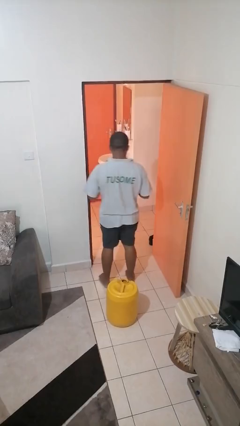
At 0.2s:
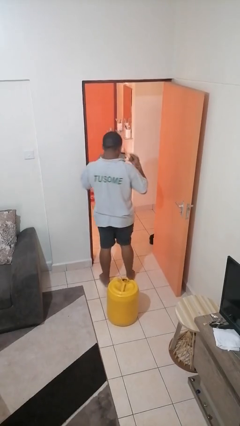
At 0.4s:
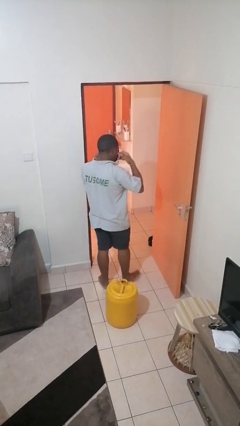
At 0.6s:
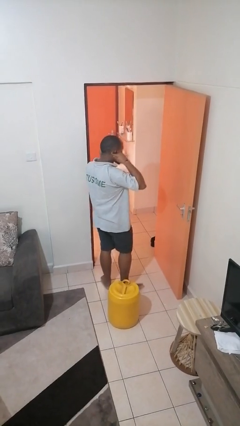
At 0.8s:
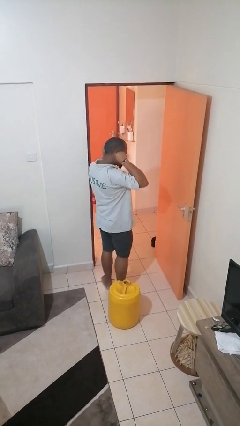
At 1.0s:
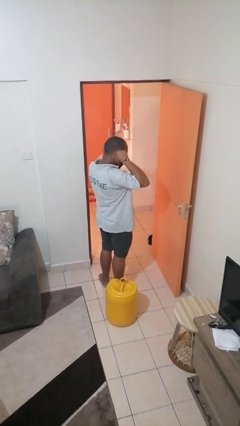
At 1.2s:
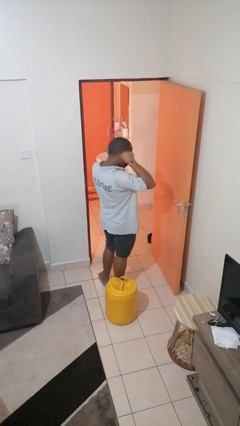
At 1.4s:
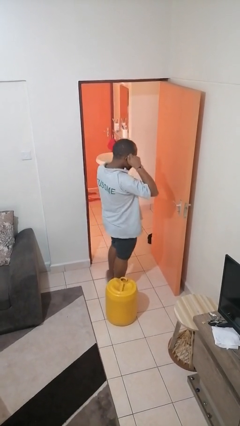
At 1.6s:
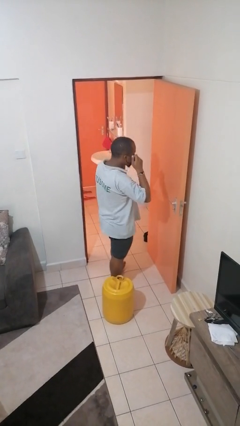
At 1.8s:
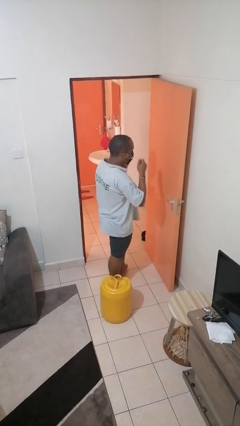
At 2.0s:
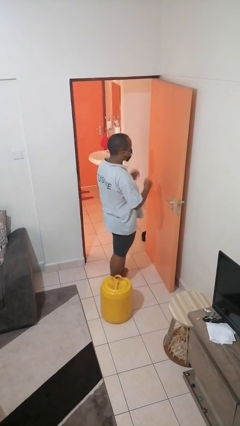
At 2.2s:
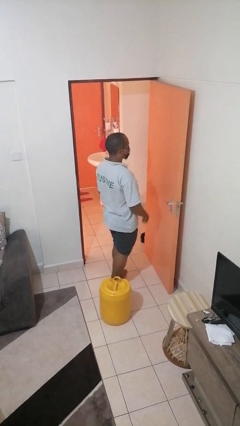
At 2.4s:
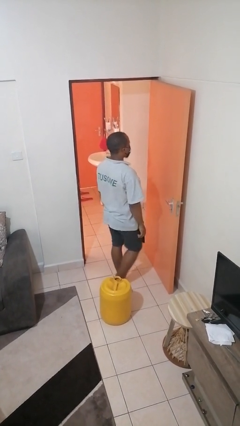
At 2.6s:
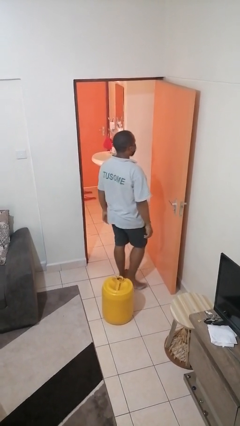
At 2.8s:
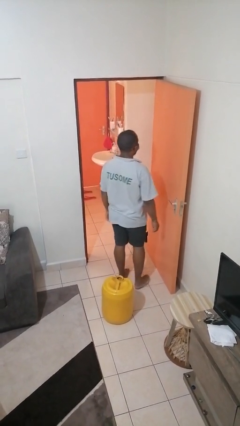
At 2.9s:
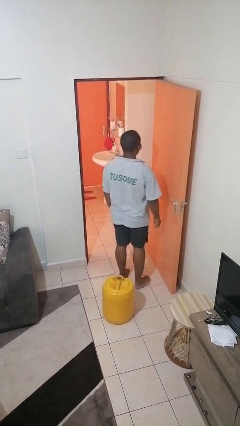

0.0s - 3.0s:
person puts on facemask

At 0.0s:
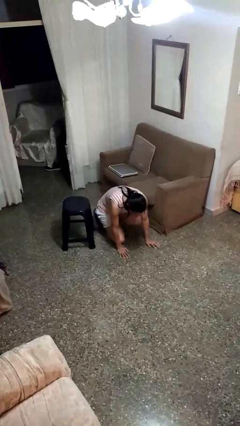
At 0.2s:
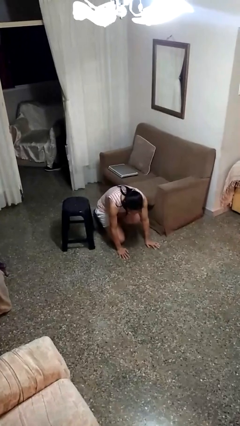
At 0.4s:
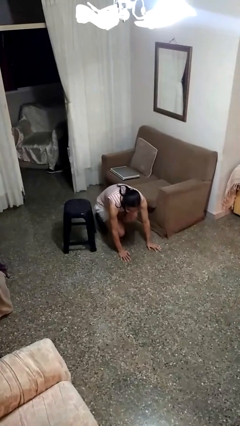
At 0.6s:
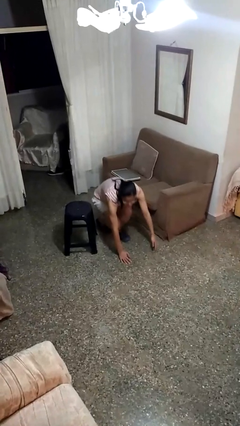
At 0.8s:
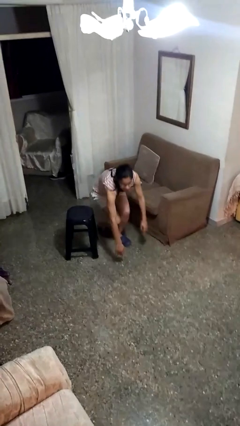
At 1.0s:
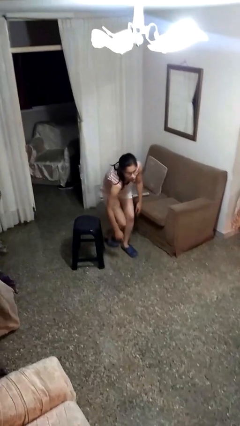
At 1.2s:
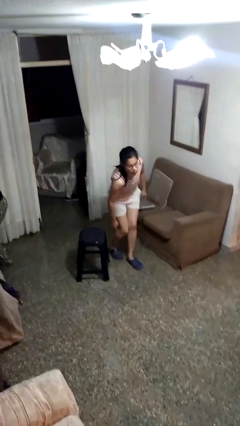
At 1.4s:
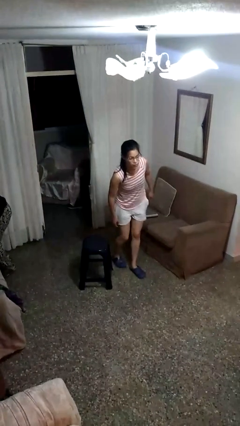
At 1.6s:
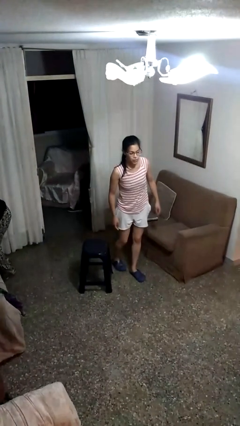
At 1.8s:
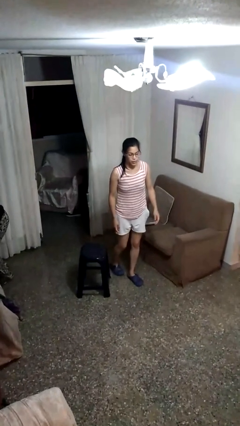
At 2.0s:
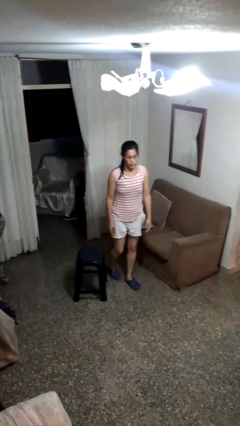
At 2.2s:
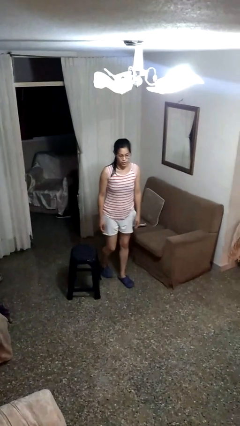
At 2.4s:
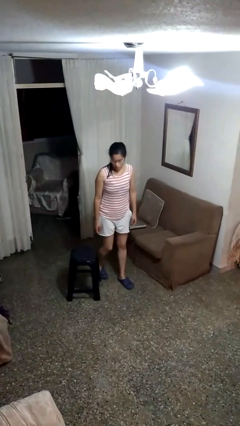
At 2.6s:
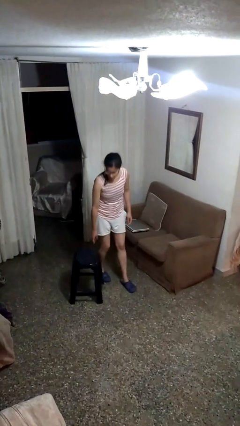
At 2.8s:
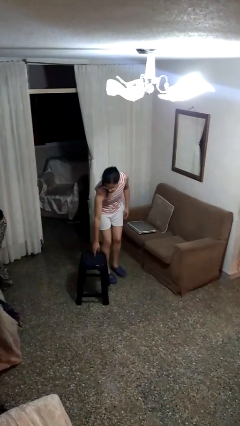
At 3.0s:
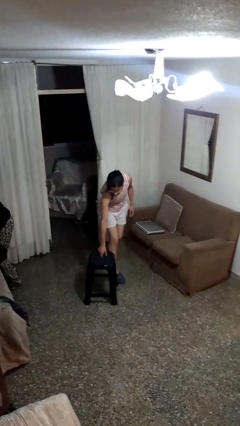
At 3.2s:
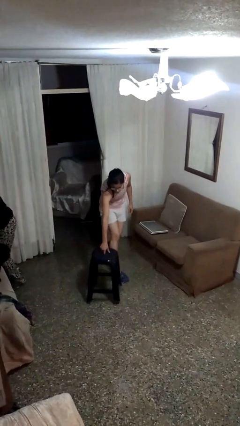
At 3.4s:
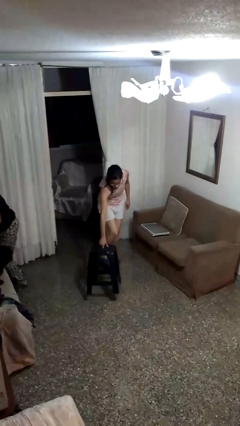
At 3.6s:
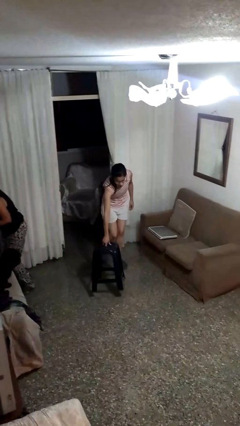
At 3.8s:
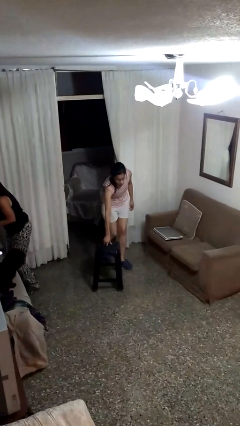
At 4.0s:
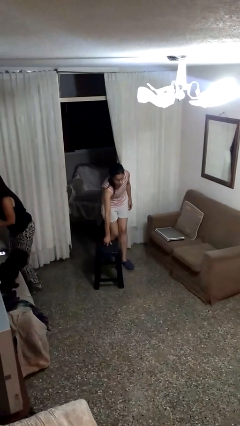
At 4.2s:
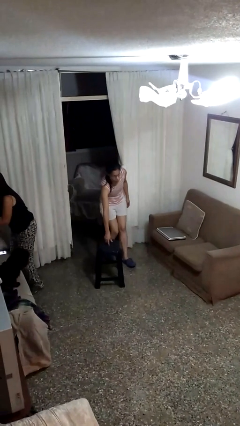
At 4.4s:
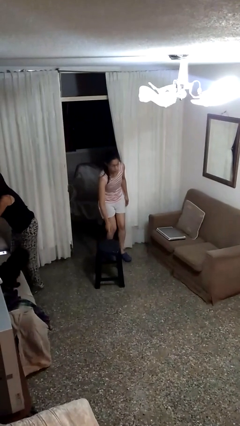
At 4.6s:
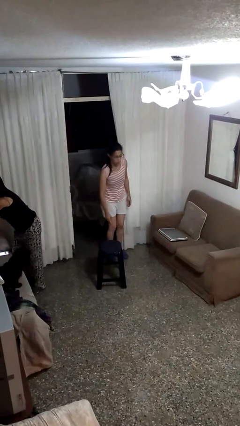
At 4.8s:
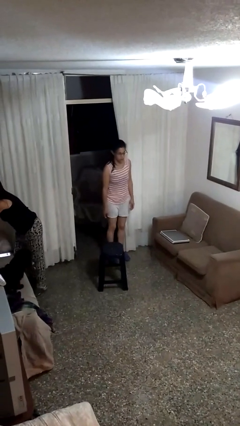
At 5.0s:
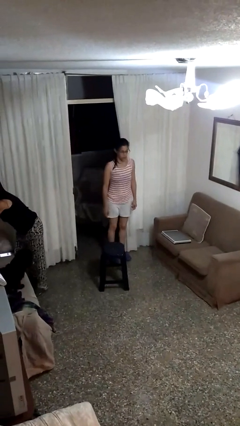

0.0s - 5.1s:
person stands up from floor

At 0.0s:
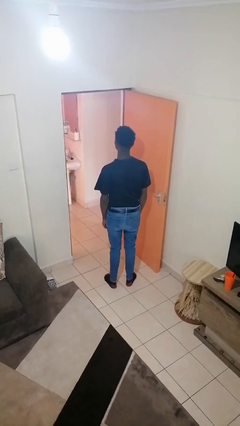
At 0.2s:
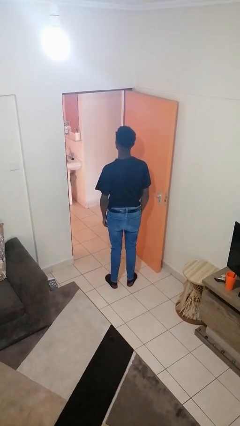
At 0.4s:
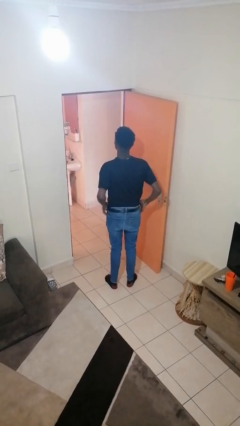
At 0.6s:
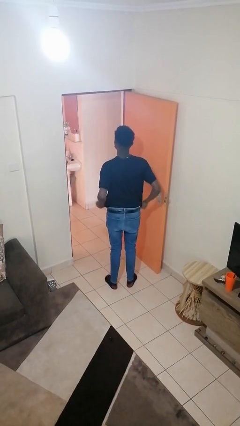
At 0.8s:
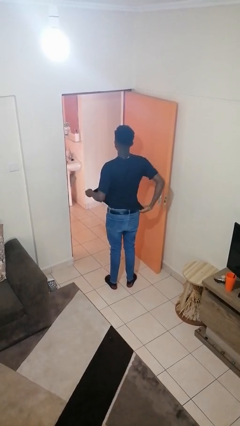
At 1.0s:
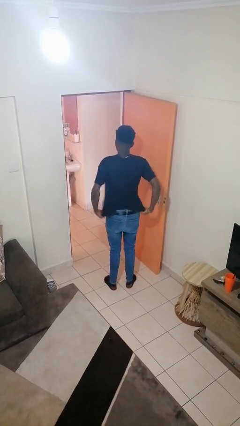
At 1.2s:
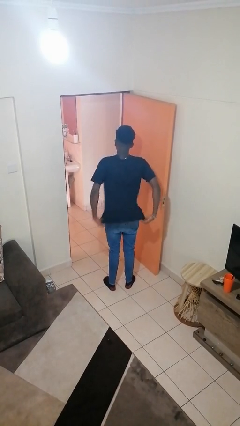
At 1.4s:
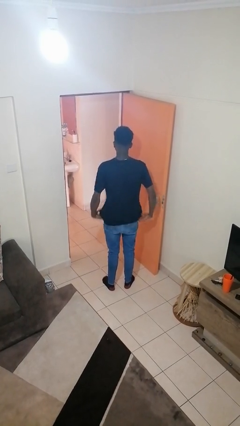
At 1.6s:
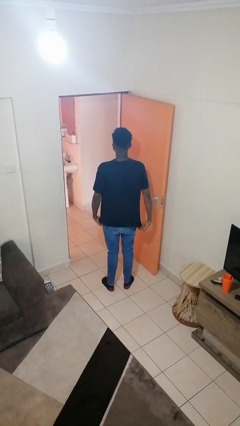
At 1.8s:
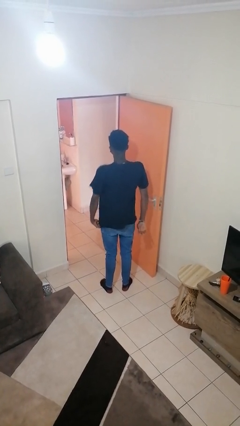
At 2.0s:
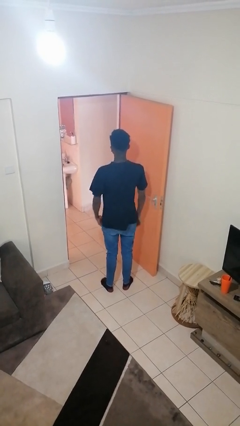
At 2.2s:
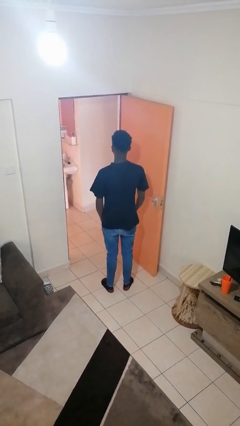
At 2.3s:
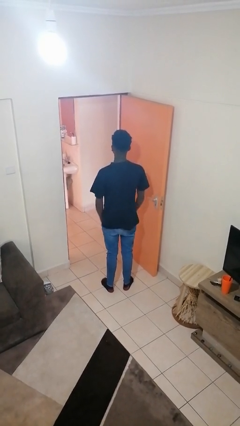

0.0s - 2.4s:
person untucks shirt

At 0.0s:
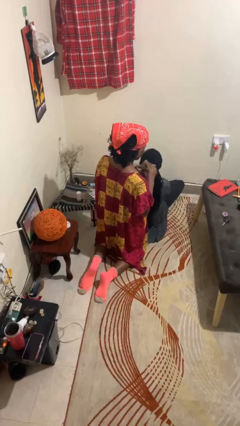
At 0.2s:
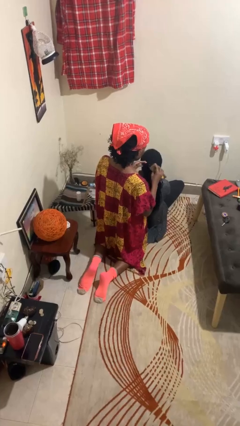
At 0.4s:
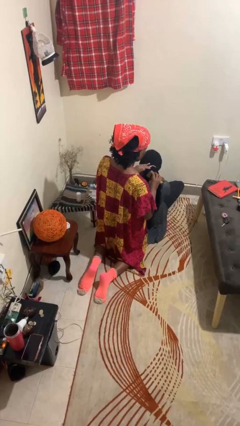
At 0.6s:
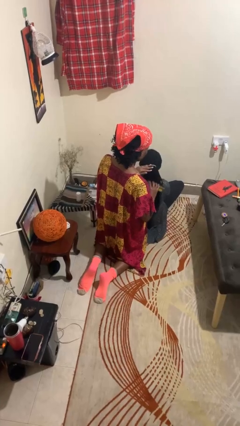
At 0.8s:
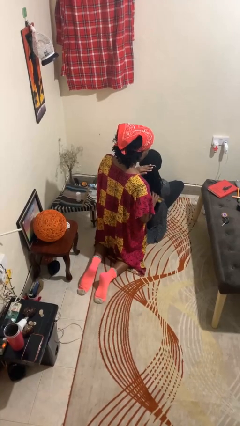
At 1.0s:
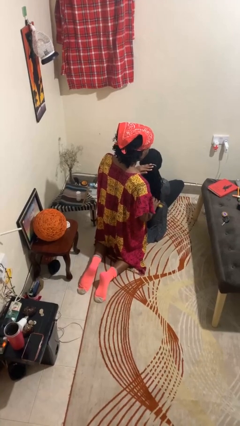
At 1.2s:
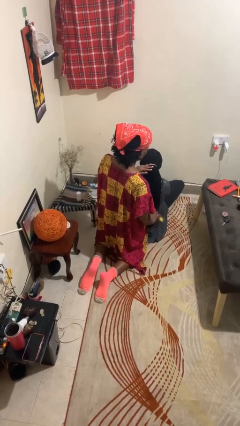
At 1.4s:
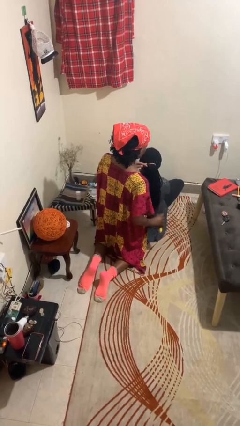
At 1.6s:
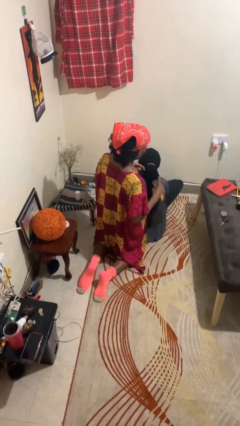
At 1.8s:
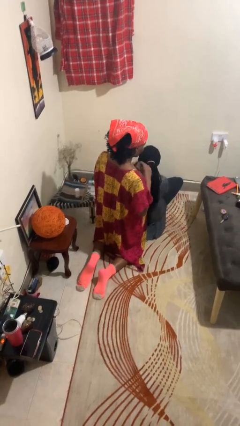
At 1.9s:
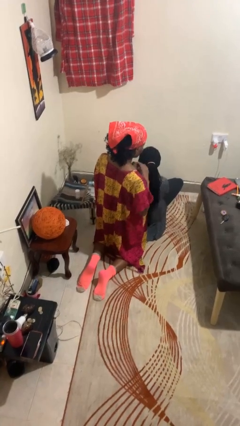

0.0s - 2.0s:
person brushes hair of person

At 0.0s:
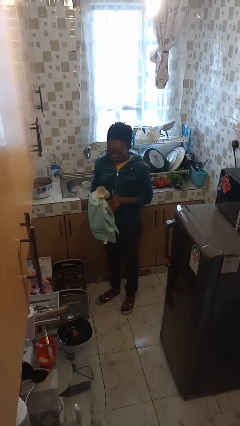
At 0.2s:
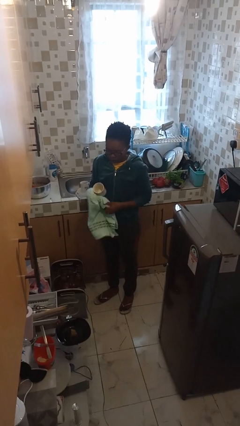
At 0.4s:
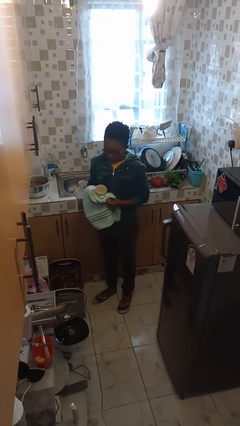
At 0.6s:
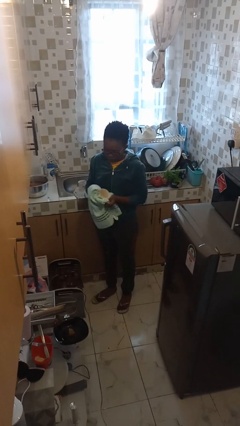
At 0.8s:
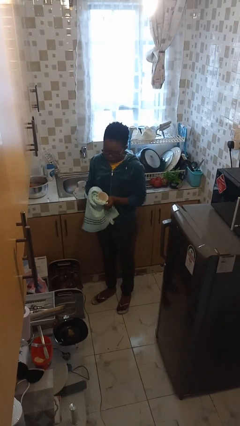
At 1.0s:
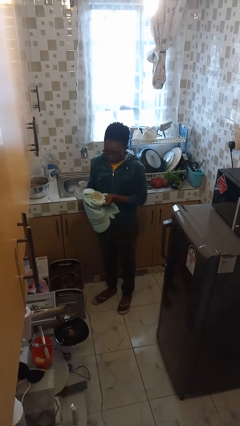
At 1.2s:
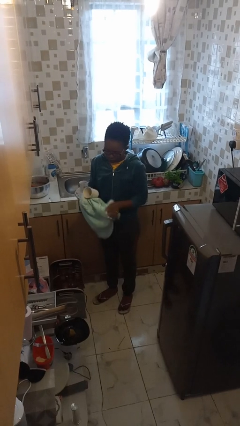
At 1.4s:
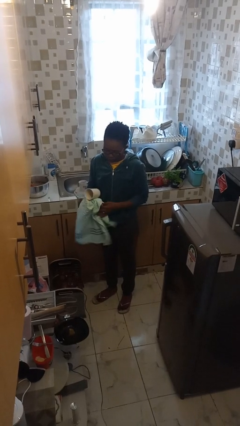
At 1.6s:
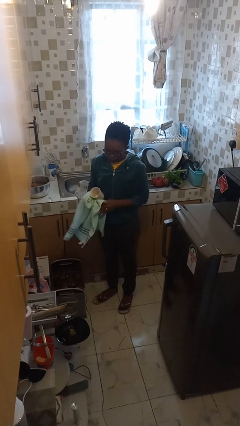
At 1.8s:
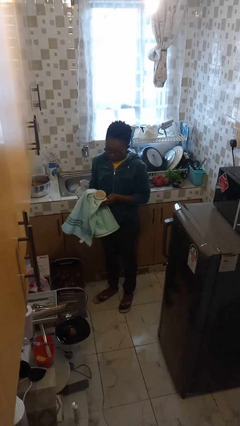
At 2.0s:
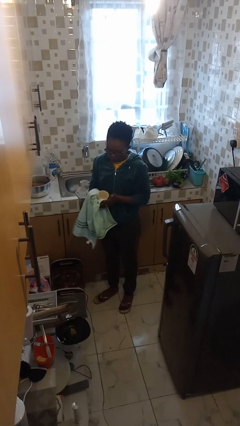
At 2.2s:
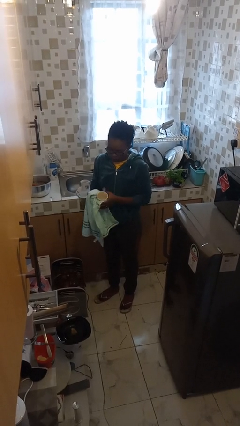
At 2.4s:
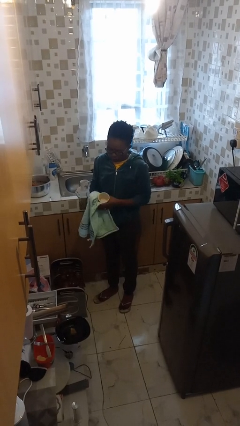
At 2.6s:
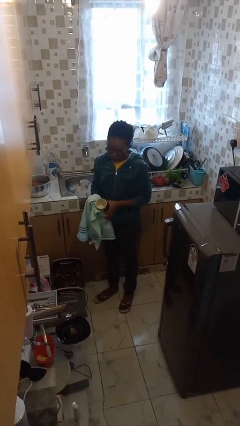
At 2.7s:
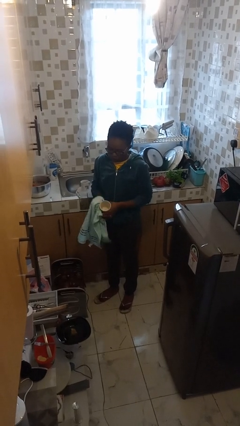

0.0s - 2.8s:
person dries dish

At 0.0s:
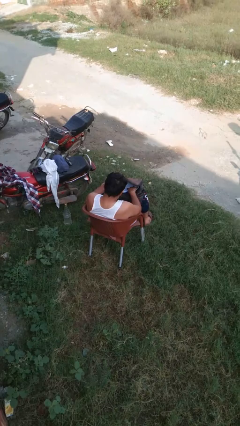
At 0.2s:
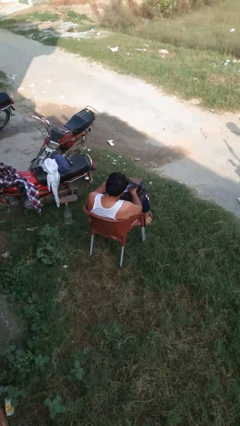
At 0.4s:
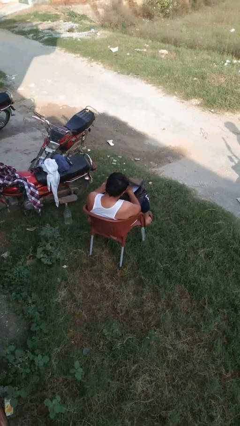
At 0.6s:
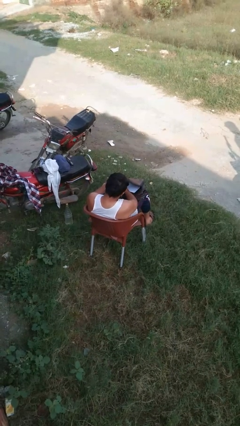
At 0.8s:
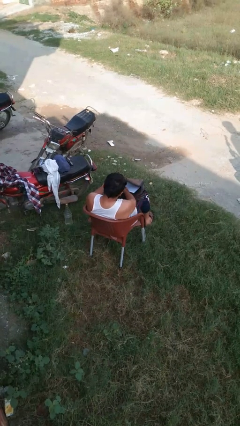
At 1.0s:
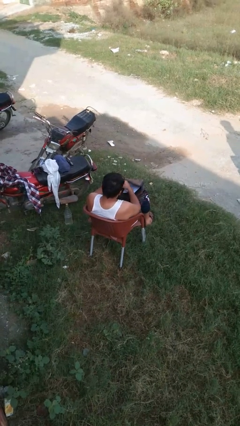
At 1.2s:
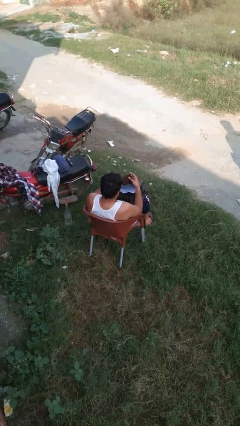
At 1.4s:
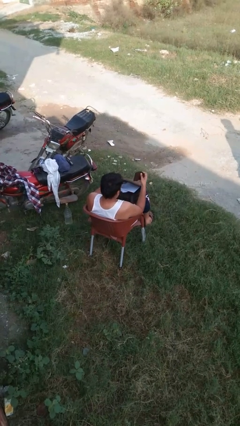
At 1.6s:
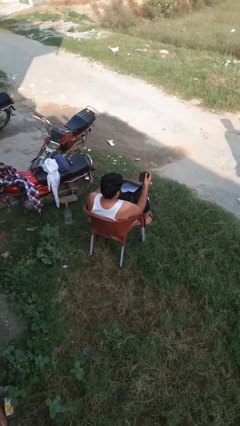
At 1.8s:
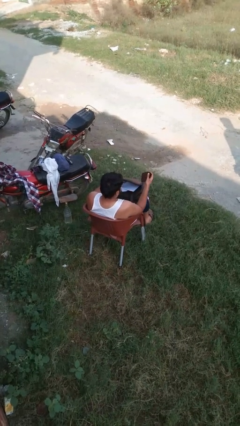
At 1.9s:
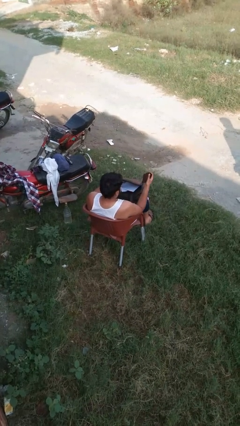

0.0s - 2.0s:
person takes object from backpack
